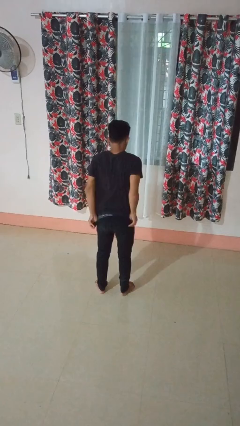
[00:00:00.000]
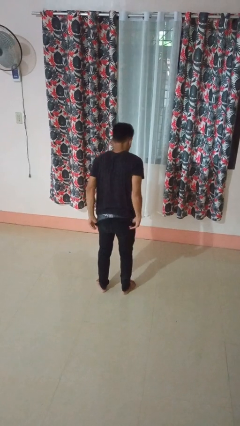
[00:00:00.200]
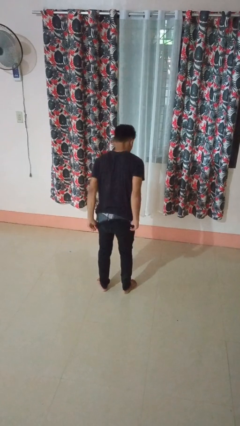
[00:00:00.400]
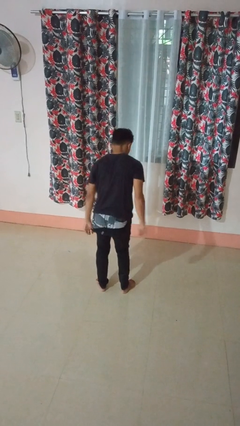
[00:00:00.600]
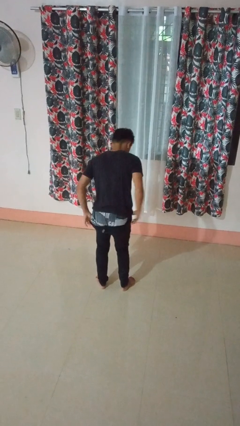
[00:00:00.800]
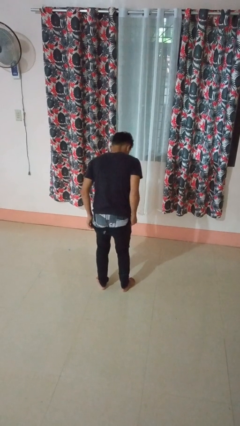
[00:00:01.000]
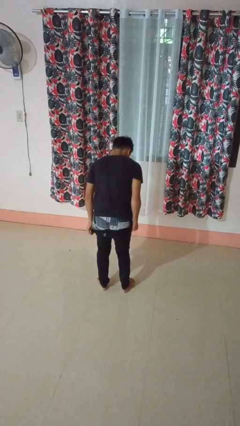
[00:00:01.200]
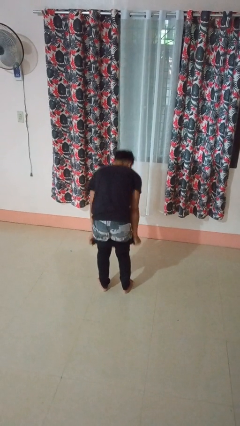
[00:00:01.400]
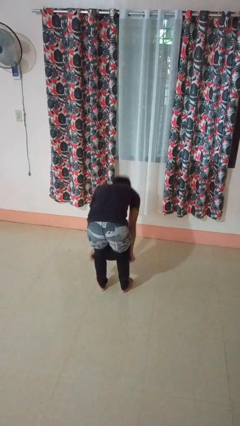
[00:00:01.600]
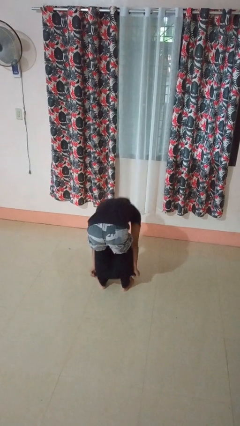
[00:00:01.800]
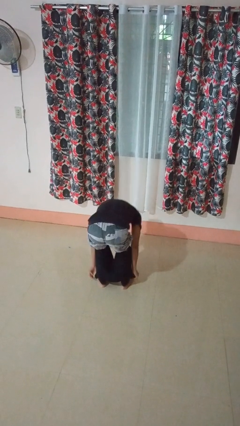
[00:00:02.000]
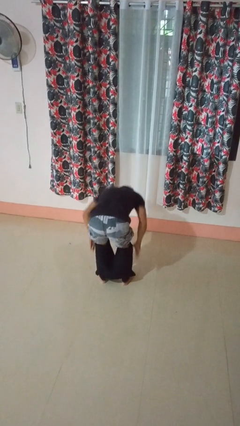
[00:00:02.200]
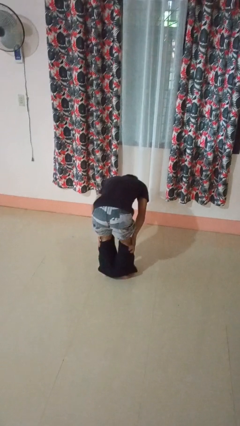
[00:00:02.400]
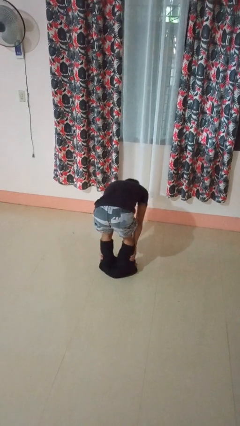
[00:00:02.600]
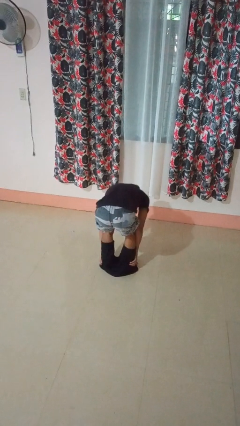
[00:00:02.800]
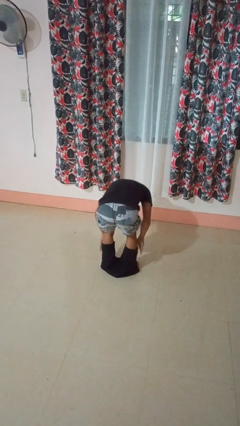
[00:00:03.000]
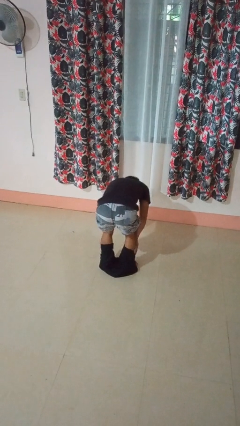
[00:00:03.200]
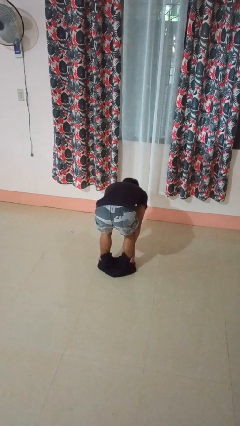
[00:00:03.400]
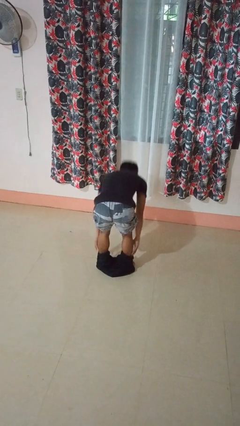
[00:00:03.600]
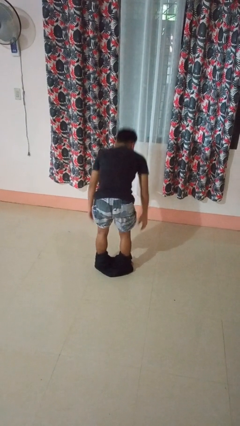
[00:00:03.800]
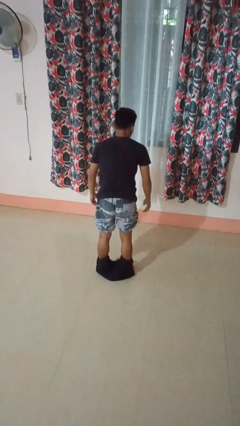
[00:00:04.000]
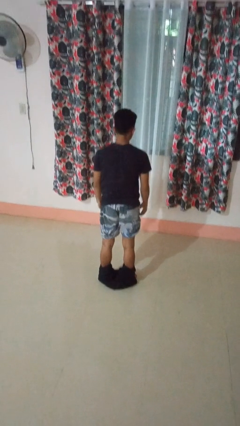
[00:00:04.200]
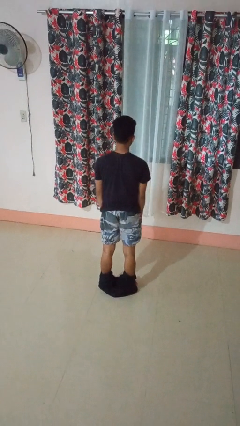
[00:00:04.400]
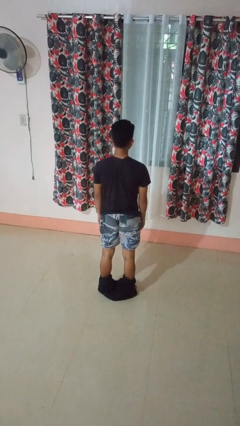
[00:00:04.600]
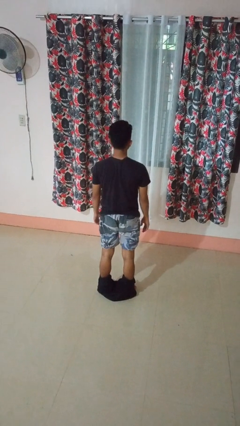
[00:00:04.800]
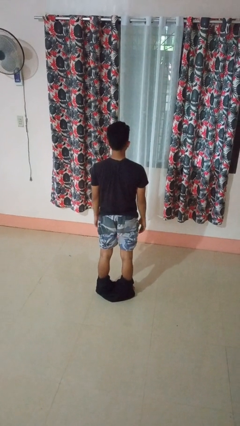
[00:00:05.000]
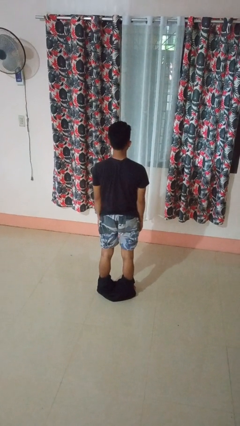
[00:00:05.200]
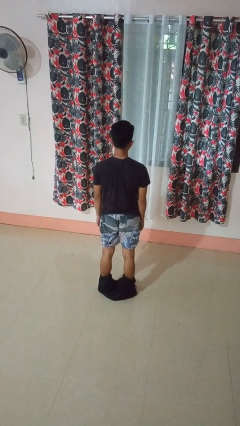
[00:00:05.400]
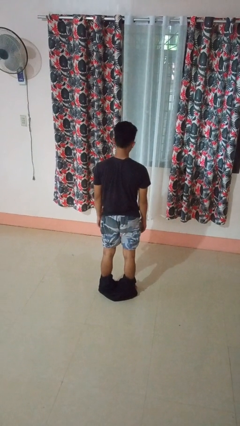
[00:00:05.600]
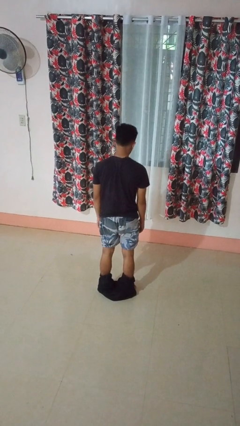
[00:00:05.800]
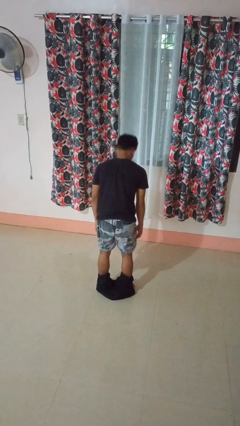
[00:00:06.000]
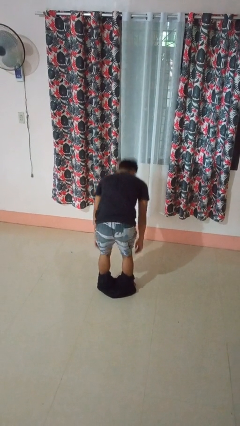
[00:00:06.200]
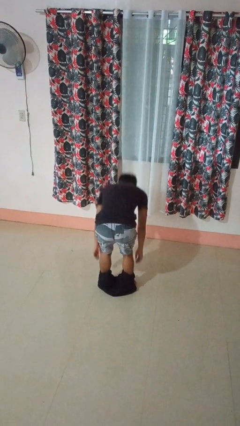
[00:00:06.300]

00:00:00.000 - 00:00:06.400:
person takes off pants

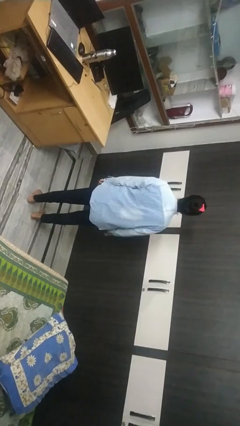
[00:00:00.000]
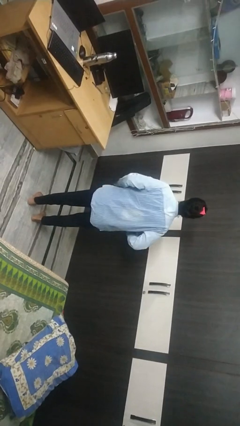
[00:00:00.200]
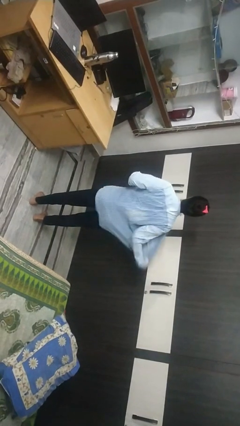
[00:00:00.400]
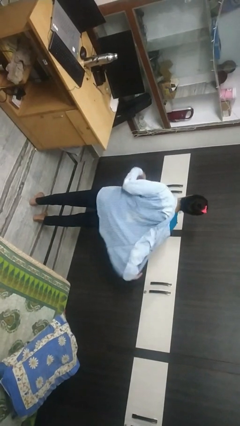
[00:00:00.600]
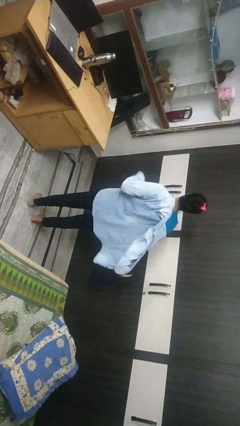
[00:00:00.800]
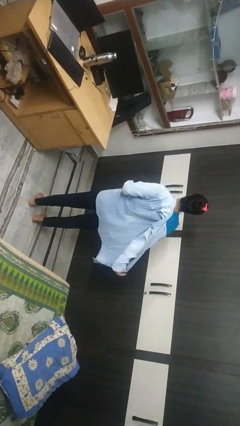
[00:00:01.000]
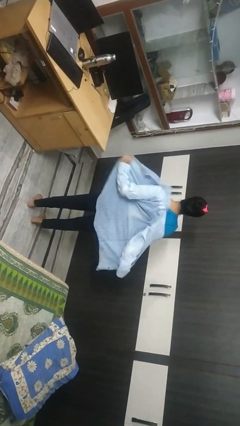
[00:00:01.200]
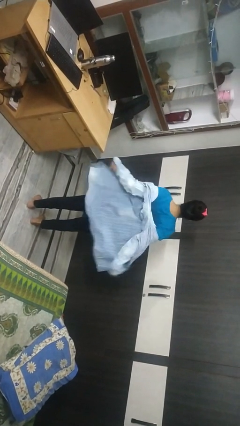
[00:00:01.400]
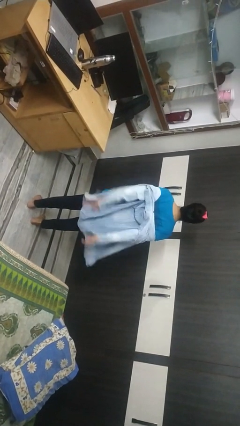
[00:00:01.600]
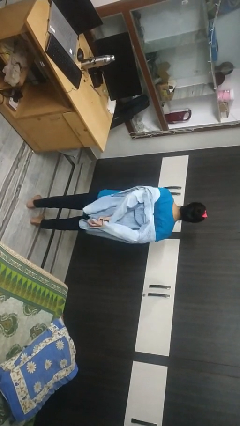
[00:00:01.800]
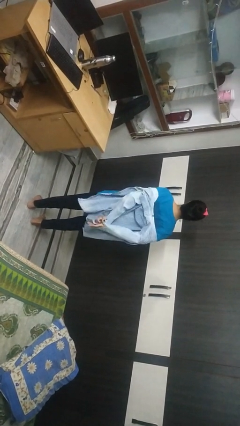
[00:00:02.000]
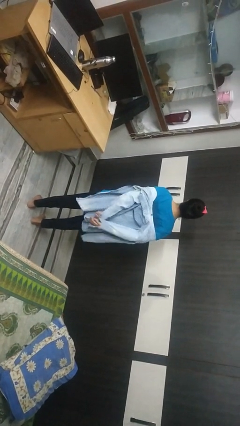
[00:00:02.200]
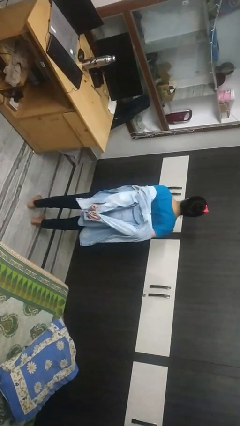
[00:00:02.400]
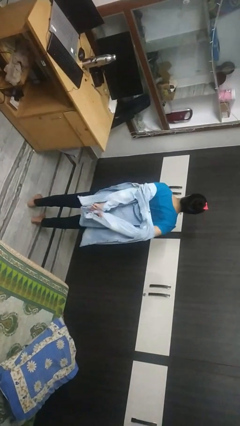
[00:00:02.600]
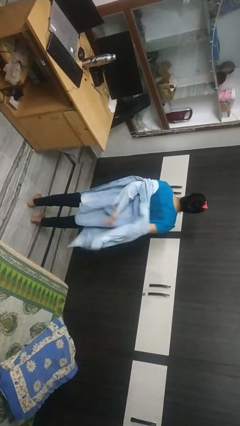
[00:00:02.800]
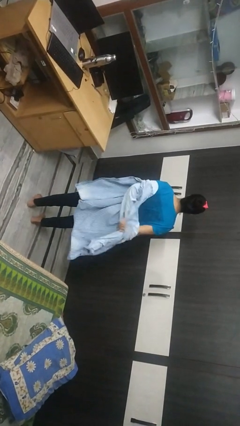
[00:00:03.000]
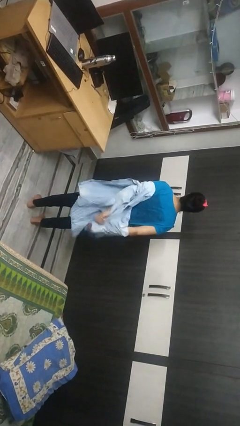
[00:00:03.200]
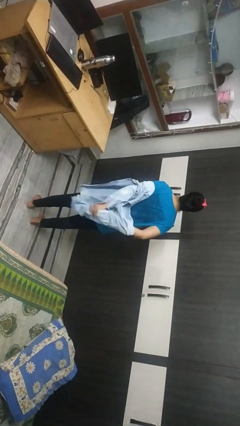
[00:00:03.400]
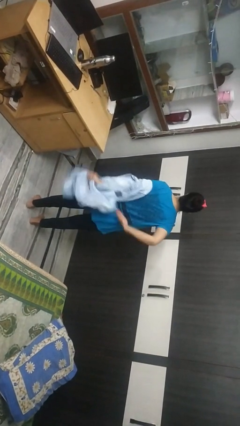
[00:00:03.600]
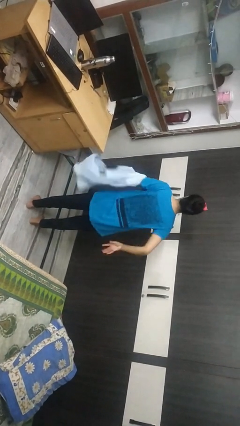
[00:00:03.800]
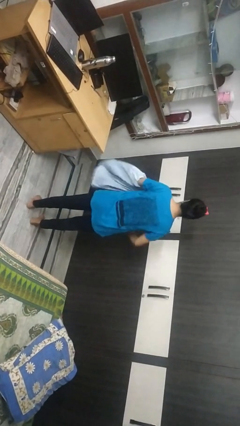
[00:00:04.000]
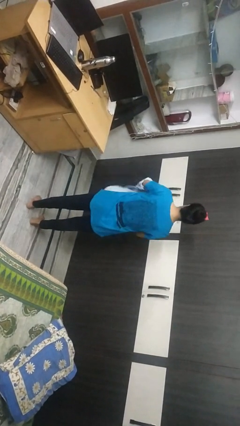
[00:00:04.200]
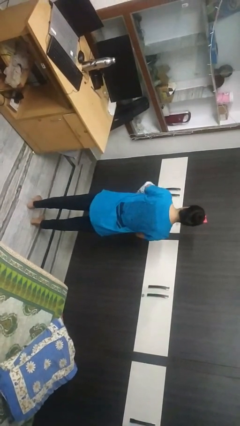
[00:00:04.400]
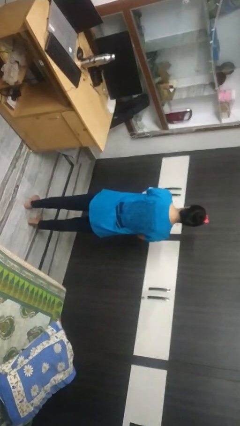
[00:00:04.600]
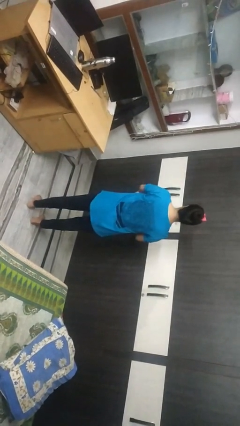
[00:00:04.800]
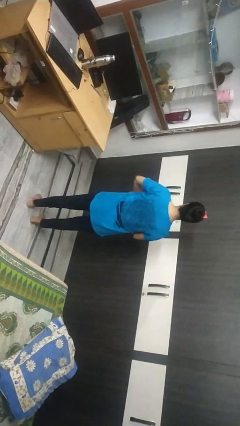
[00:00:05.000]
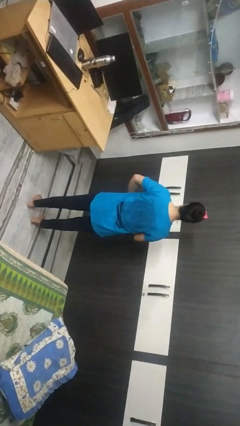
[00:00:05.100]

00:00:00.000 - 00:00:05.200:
person takes off shirt

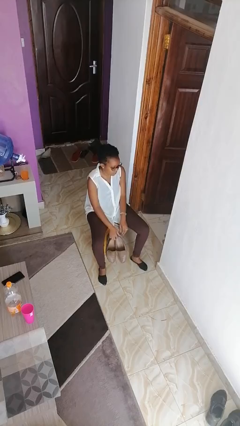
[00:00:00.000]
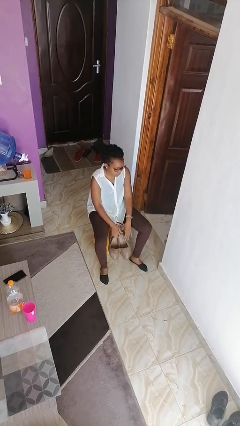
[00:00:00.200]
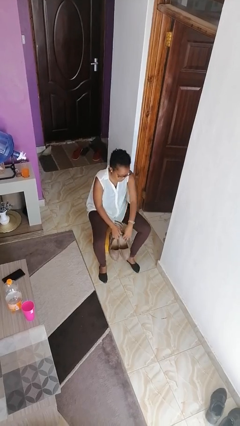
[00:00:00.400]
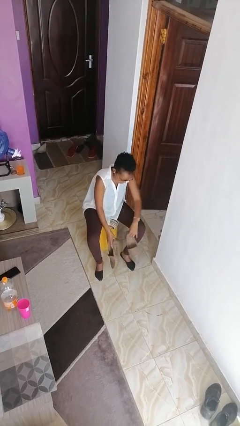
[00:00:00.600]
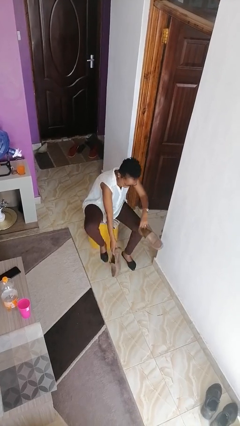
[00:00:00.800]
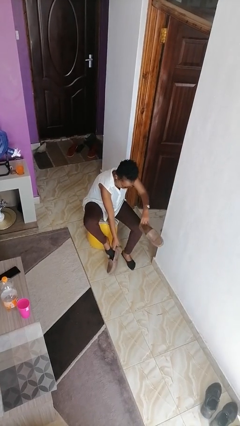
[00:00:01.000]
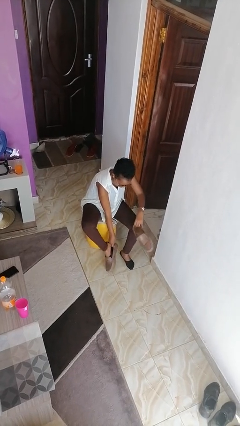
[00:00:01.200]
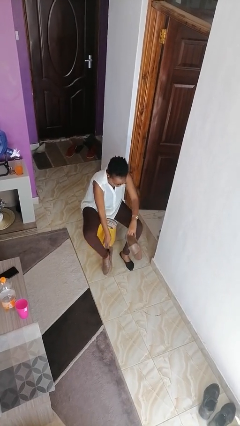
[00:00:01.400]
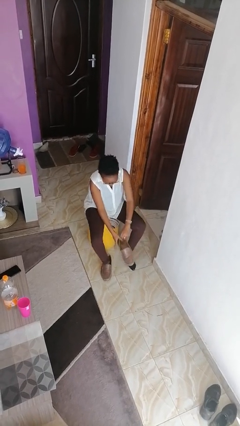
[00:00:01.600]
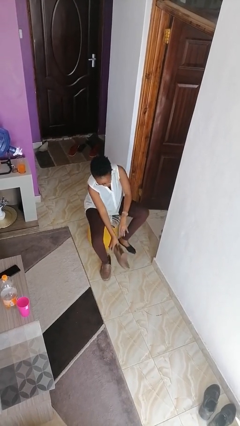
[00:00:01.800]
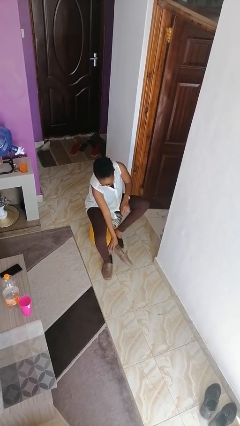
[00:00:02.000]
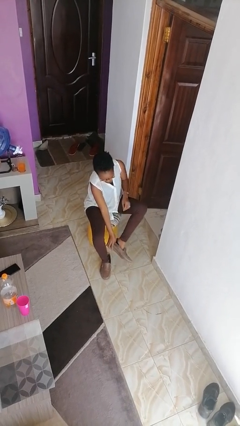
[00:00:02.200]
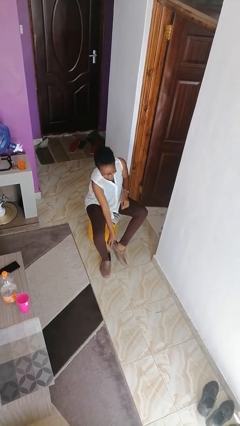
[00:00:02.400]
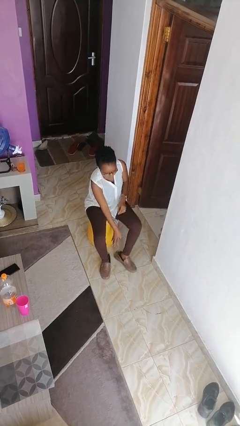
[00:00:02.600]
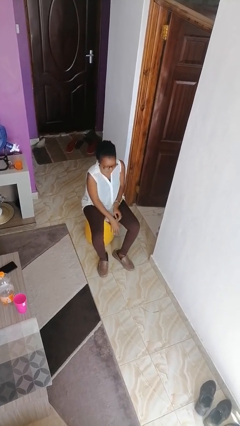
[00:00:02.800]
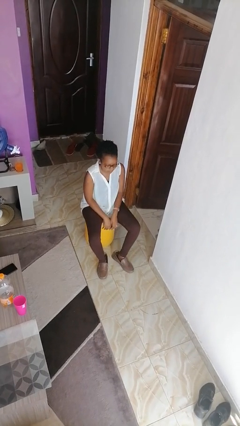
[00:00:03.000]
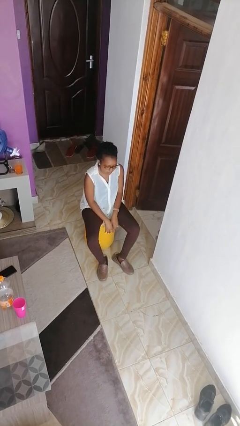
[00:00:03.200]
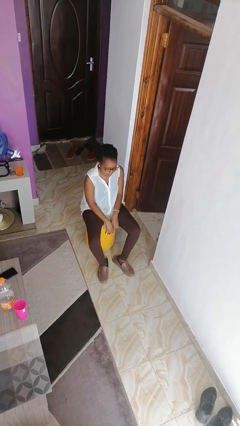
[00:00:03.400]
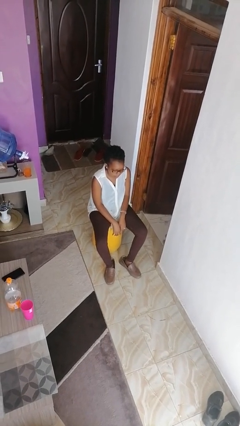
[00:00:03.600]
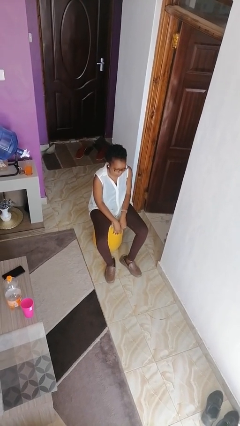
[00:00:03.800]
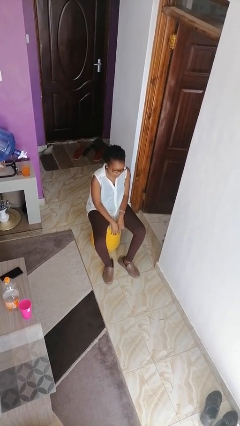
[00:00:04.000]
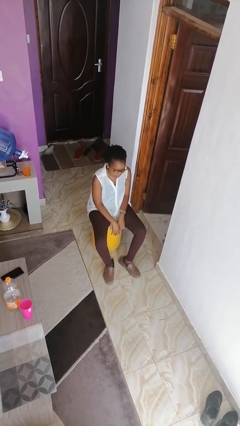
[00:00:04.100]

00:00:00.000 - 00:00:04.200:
person puts on shoes

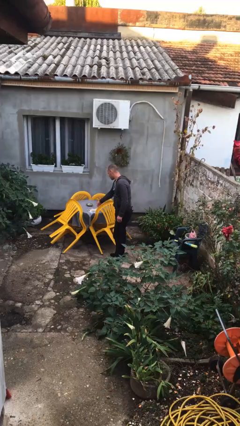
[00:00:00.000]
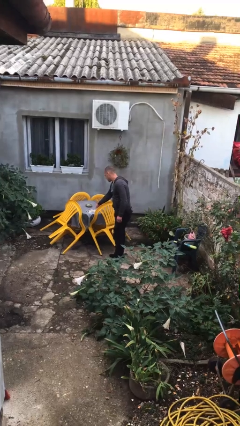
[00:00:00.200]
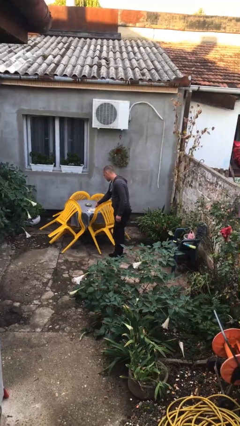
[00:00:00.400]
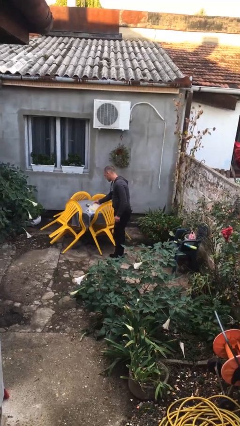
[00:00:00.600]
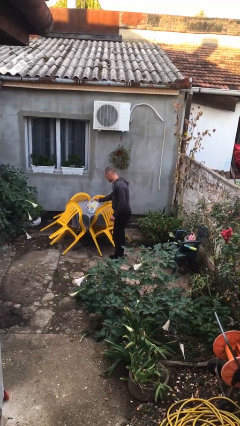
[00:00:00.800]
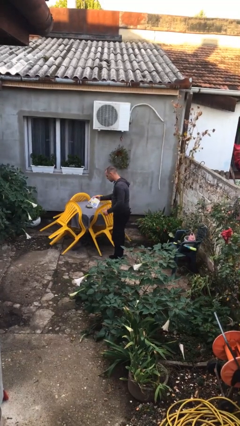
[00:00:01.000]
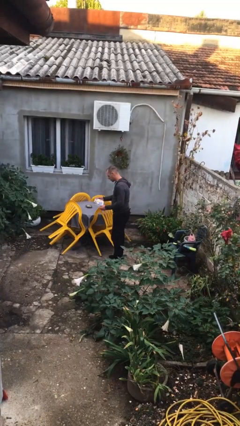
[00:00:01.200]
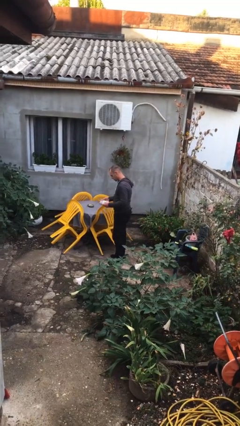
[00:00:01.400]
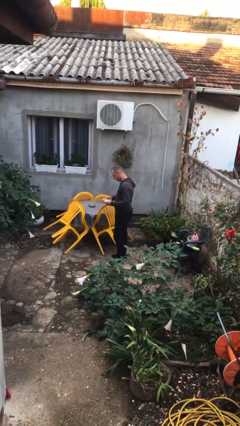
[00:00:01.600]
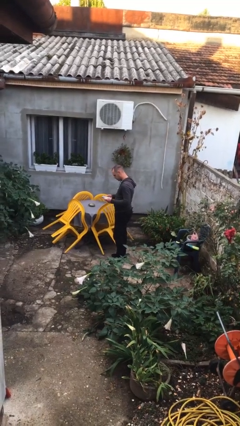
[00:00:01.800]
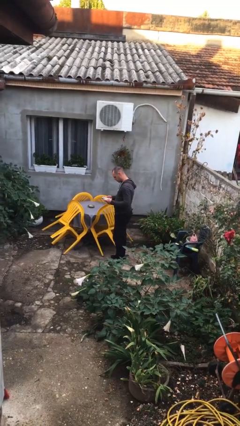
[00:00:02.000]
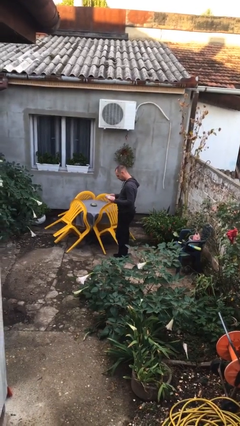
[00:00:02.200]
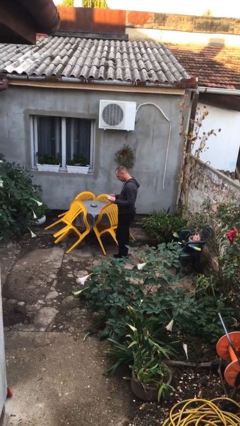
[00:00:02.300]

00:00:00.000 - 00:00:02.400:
person picks up object from table
